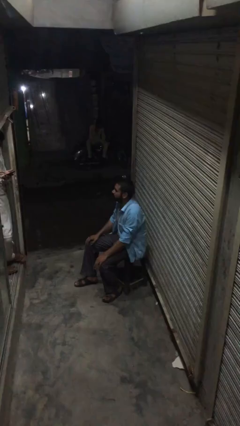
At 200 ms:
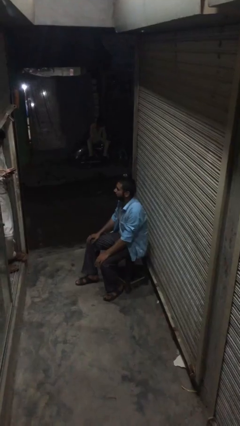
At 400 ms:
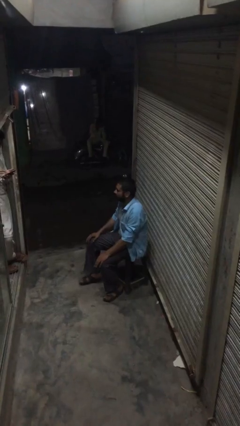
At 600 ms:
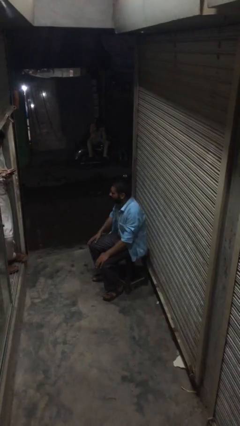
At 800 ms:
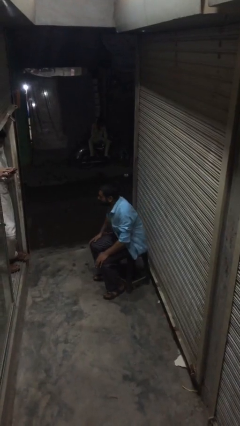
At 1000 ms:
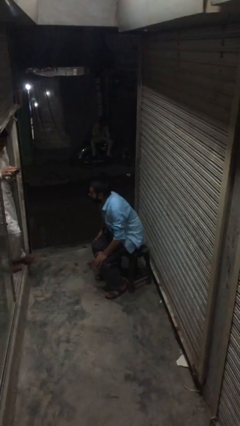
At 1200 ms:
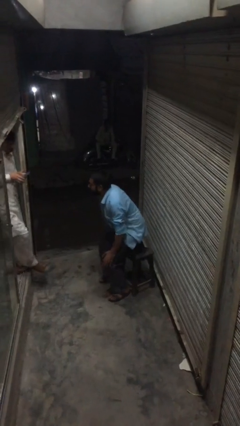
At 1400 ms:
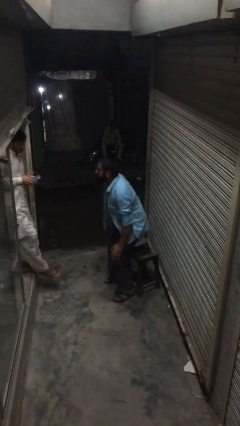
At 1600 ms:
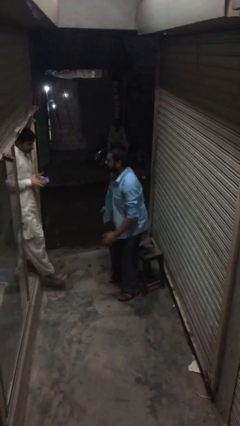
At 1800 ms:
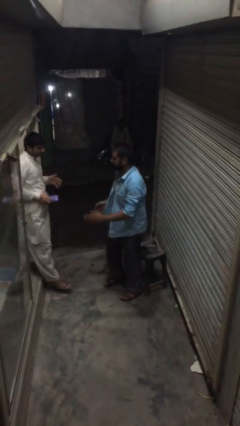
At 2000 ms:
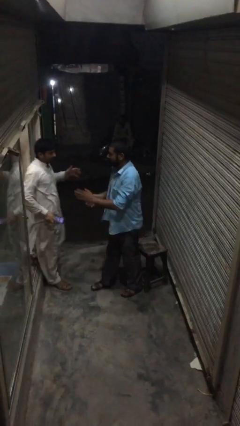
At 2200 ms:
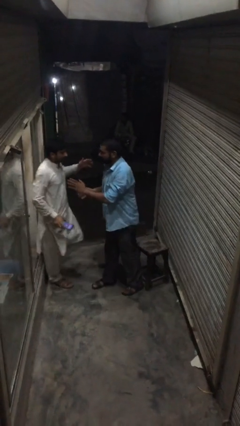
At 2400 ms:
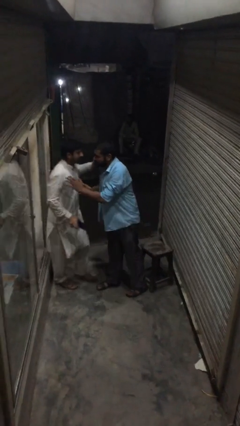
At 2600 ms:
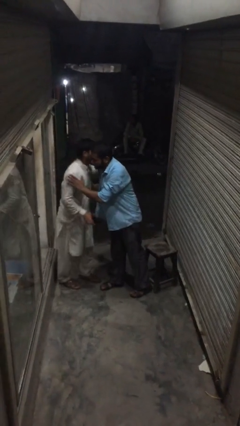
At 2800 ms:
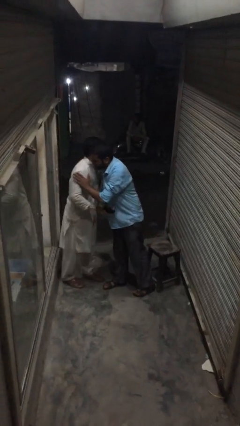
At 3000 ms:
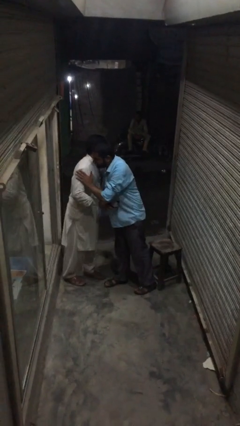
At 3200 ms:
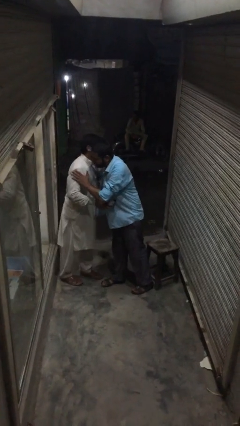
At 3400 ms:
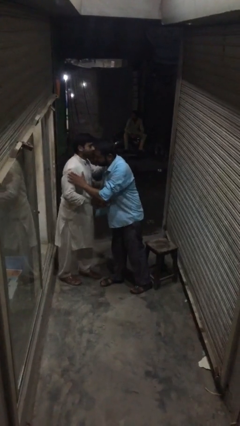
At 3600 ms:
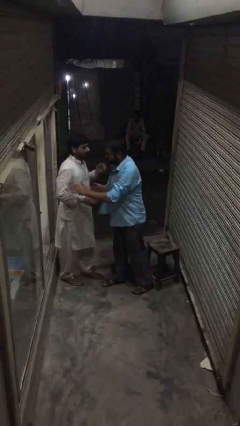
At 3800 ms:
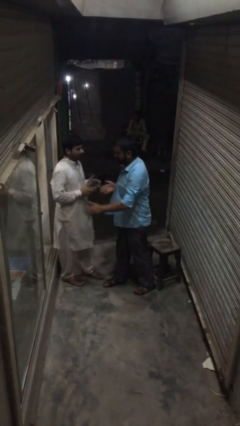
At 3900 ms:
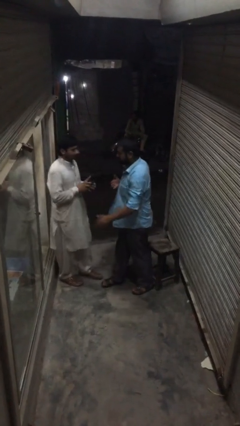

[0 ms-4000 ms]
person embraces person

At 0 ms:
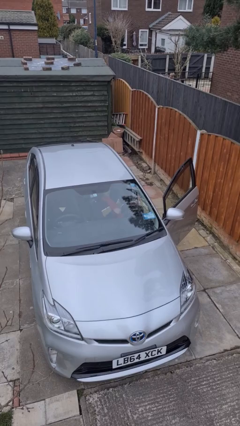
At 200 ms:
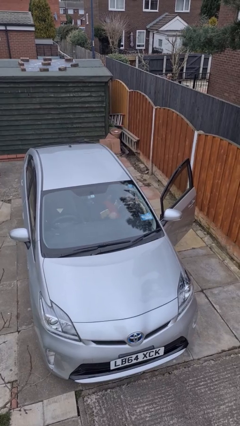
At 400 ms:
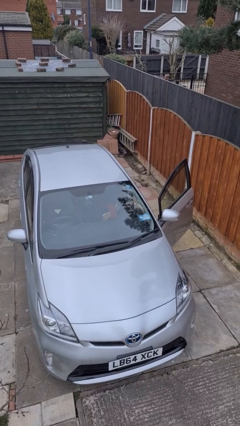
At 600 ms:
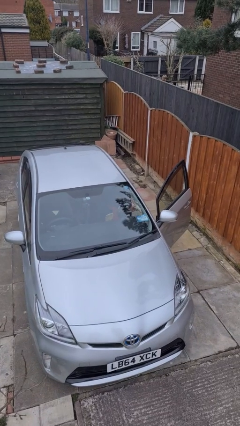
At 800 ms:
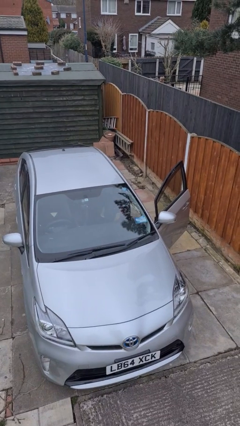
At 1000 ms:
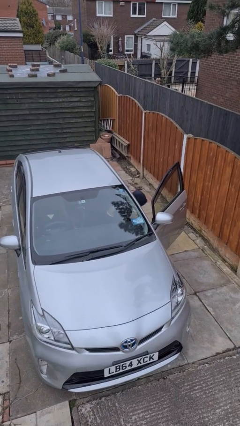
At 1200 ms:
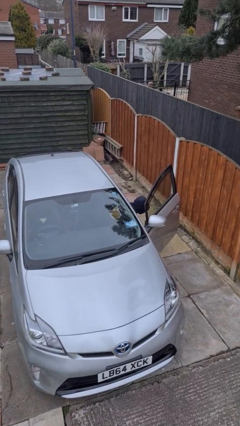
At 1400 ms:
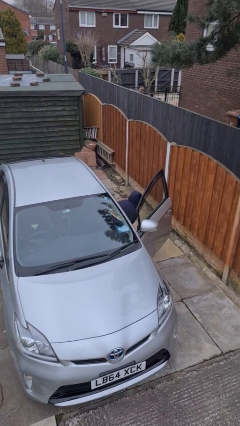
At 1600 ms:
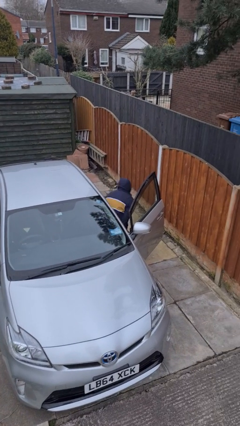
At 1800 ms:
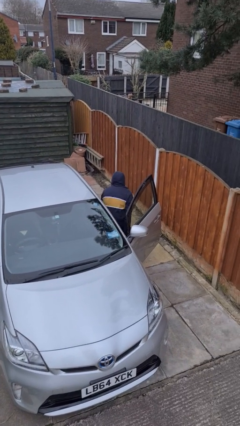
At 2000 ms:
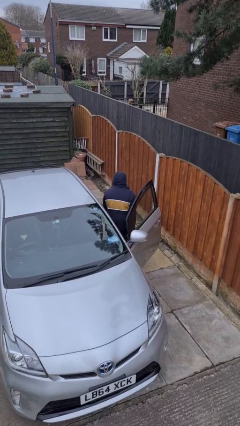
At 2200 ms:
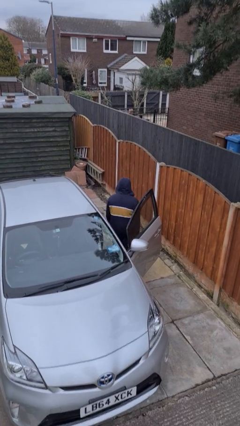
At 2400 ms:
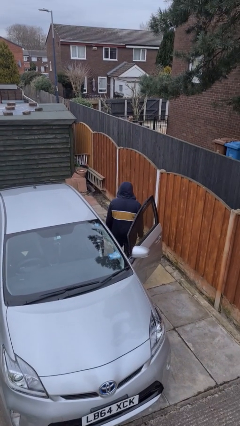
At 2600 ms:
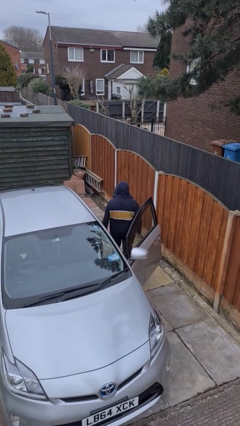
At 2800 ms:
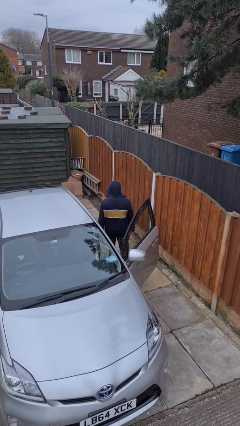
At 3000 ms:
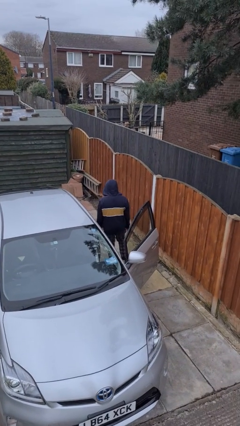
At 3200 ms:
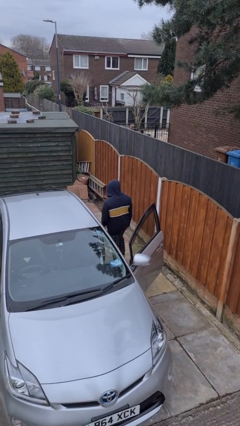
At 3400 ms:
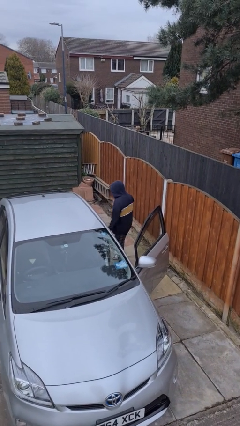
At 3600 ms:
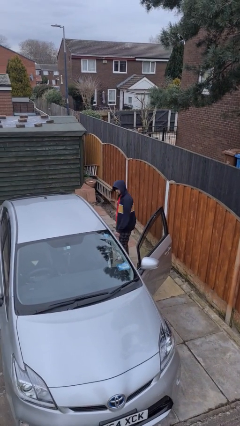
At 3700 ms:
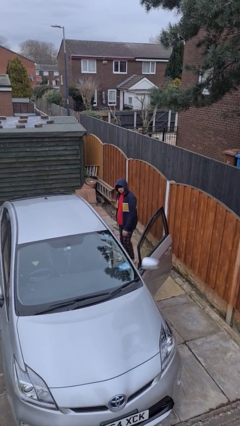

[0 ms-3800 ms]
person exits car

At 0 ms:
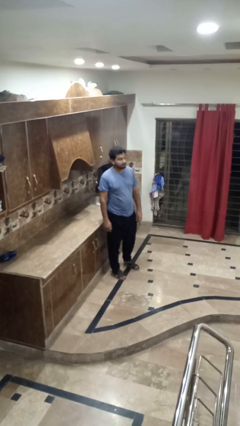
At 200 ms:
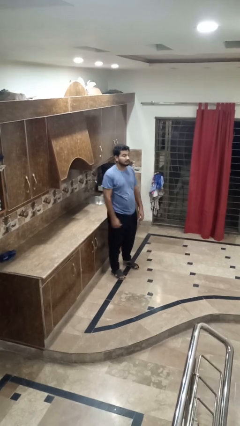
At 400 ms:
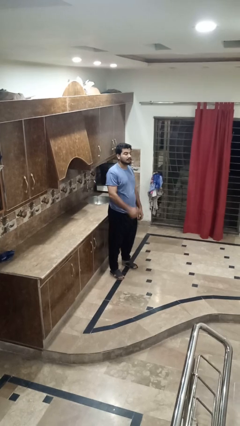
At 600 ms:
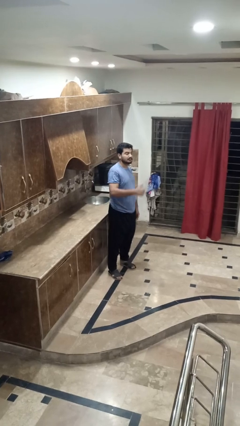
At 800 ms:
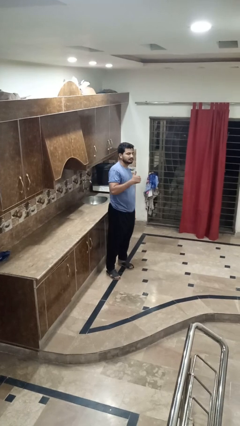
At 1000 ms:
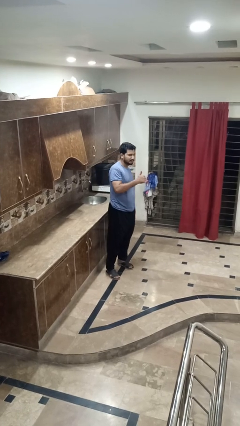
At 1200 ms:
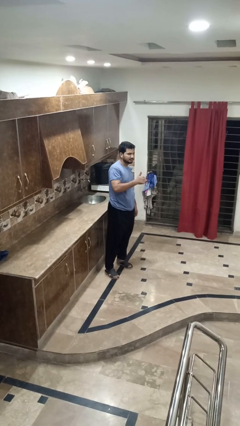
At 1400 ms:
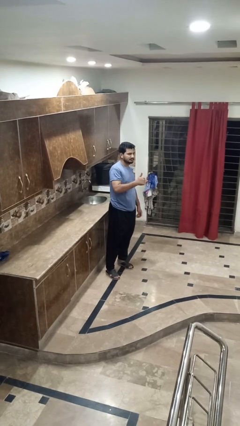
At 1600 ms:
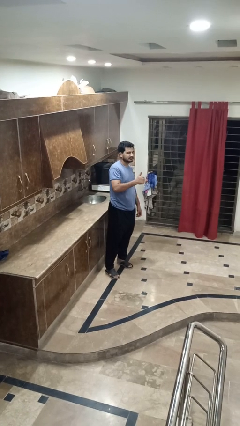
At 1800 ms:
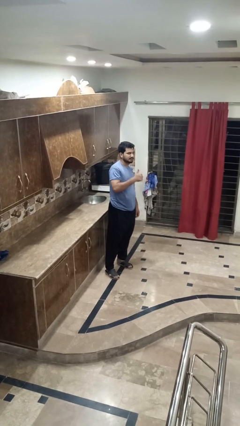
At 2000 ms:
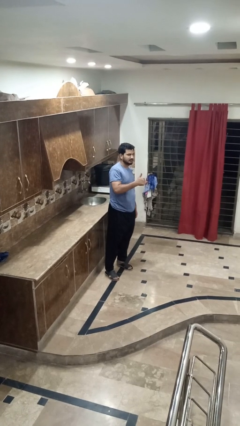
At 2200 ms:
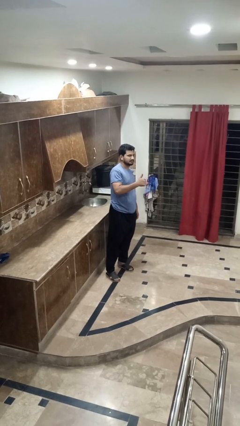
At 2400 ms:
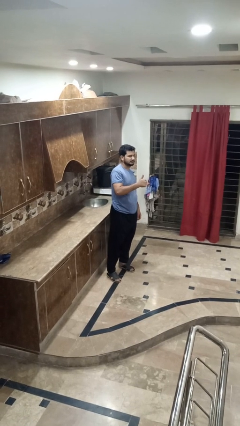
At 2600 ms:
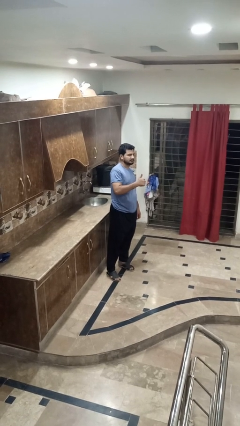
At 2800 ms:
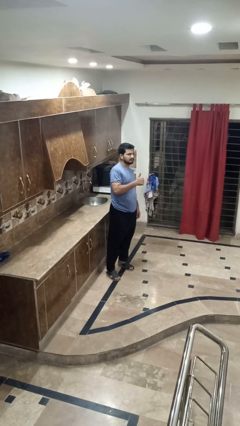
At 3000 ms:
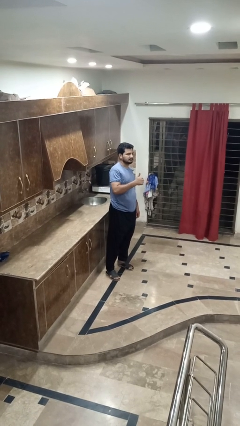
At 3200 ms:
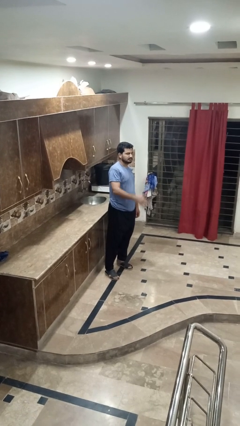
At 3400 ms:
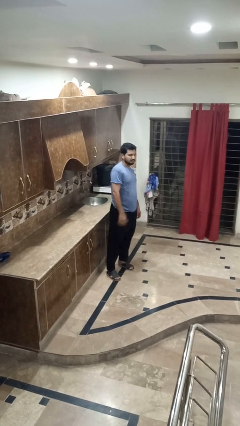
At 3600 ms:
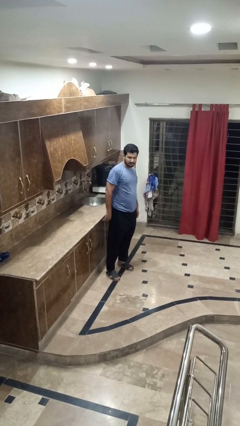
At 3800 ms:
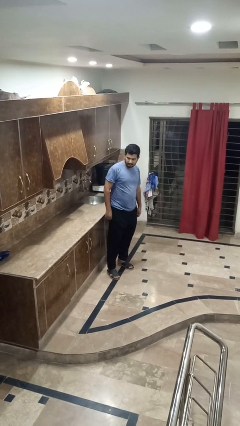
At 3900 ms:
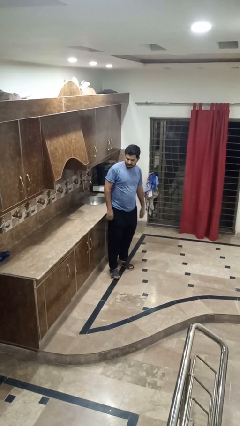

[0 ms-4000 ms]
person gestures thumbs up

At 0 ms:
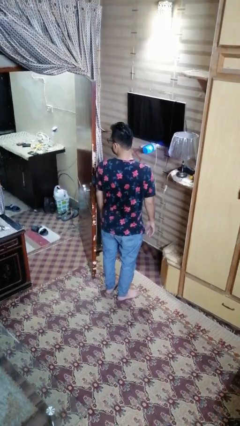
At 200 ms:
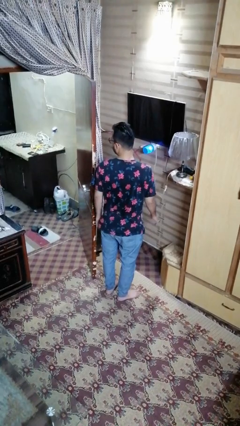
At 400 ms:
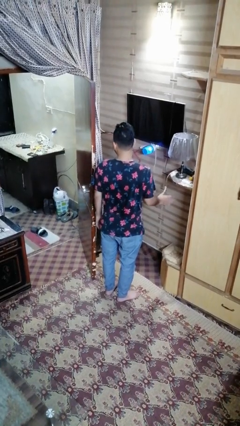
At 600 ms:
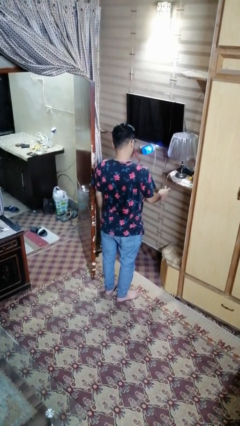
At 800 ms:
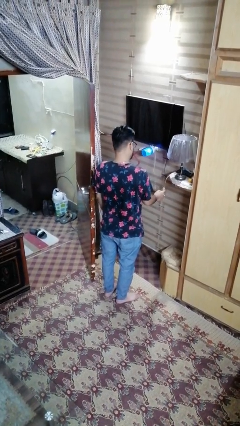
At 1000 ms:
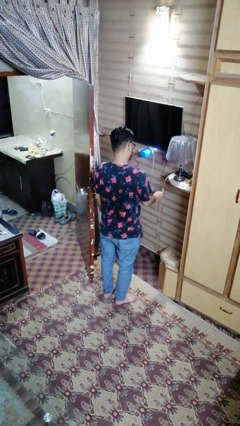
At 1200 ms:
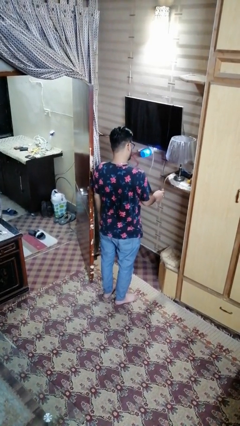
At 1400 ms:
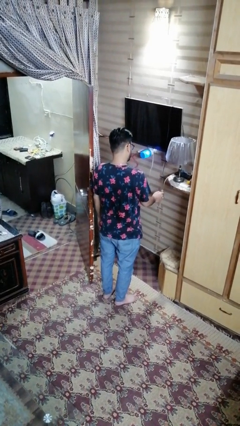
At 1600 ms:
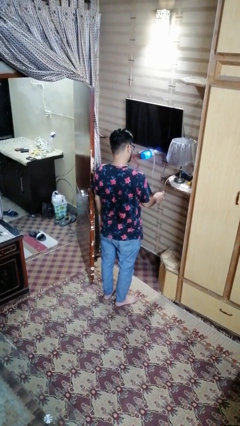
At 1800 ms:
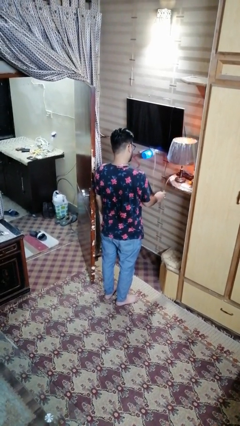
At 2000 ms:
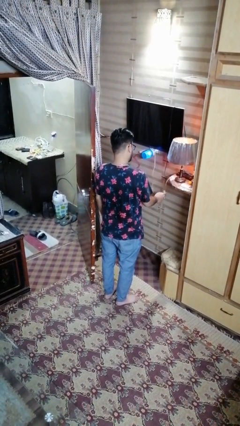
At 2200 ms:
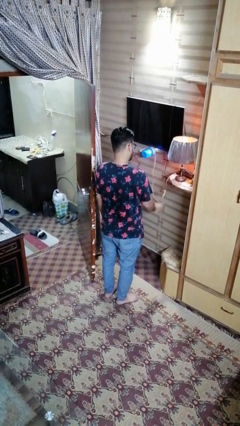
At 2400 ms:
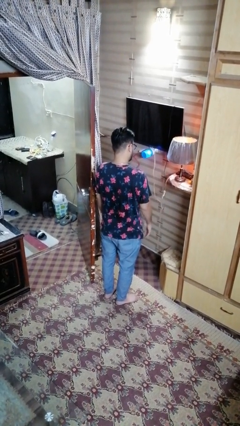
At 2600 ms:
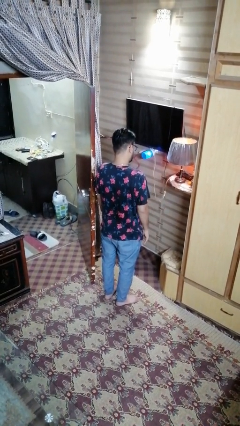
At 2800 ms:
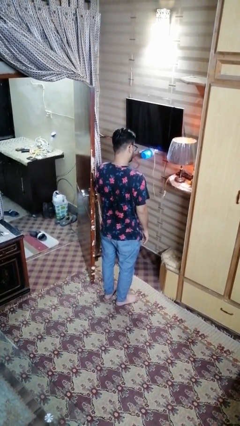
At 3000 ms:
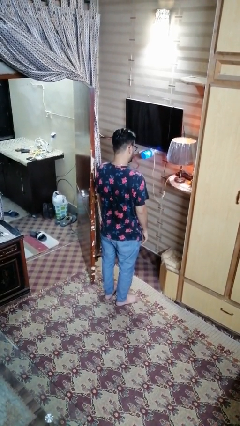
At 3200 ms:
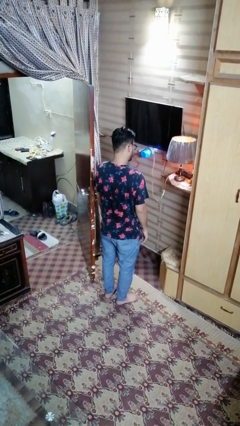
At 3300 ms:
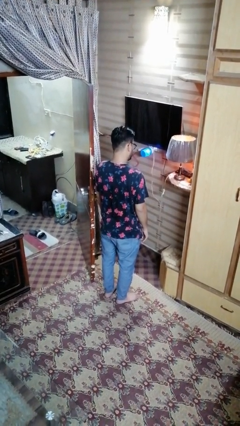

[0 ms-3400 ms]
person turns on lamp

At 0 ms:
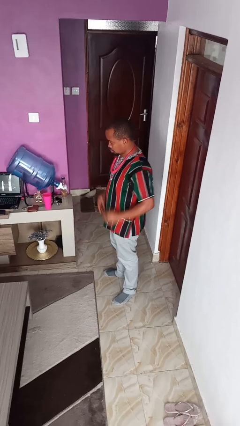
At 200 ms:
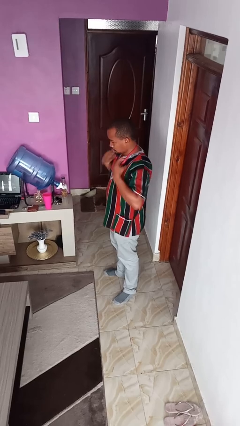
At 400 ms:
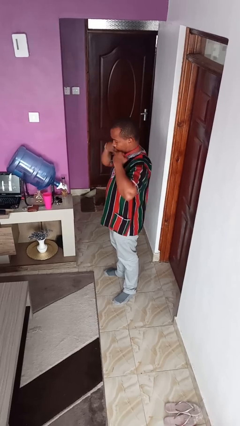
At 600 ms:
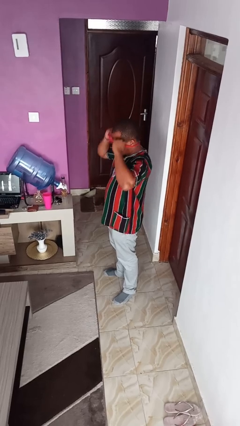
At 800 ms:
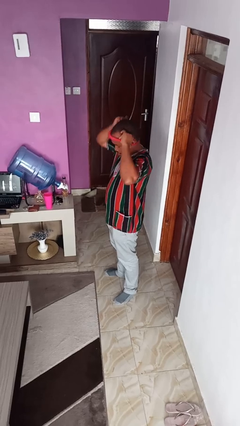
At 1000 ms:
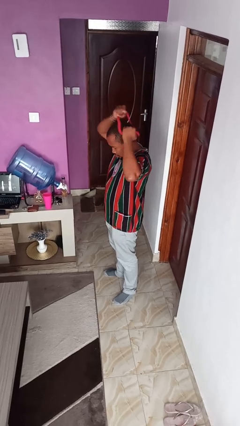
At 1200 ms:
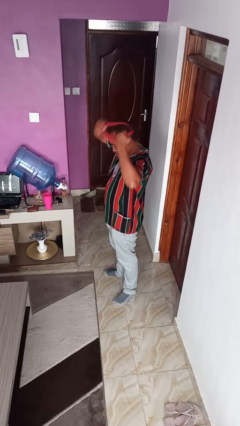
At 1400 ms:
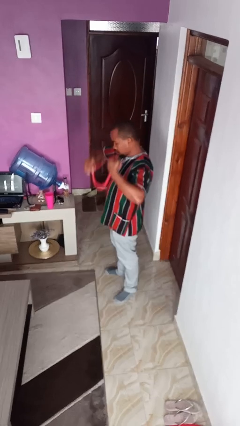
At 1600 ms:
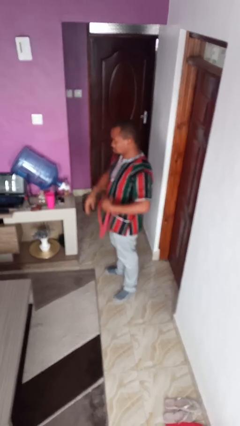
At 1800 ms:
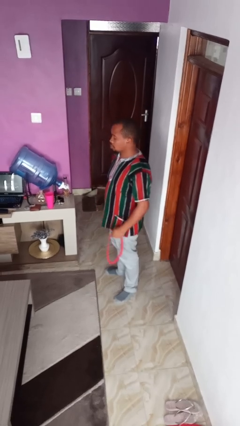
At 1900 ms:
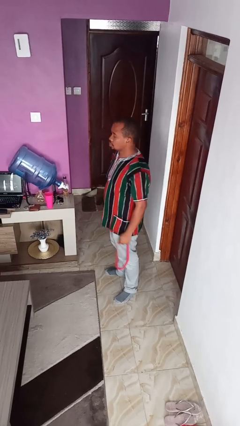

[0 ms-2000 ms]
person takes off necklace
